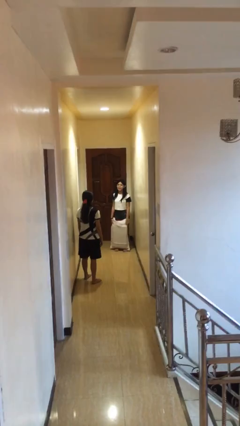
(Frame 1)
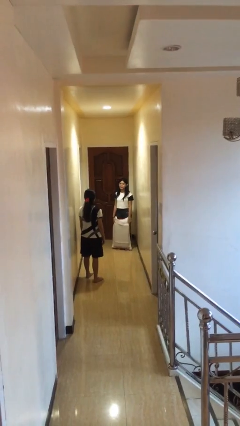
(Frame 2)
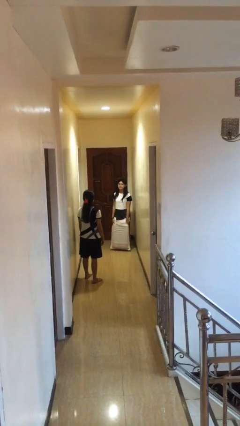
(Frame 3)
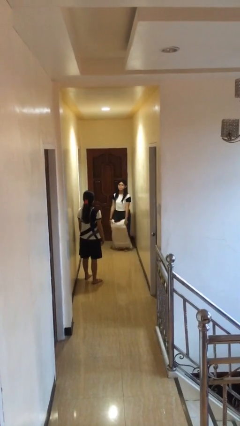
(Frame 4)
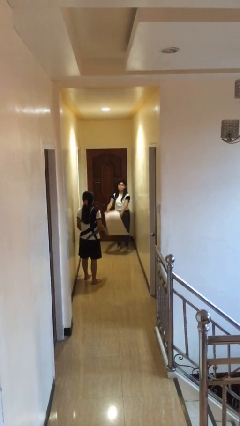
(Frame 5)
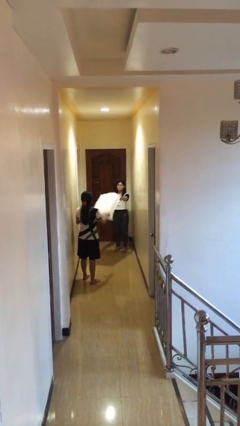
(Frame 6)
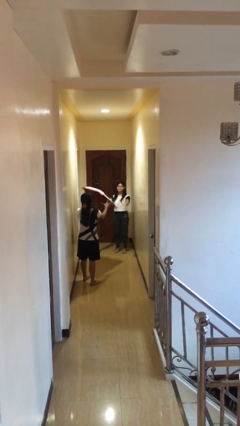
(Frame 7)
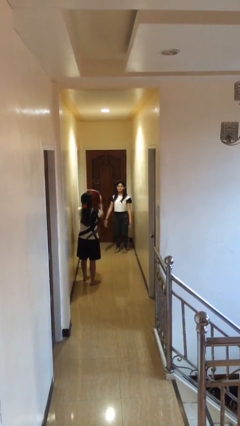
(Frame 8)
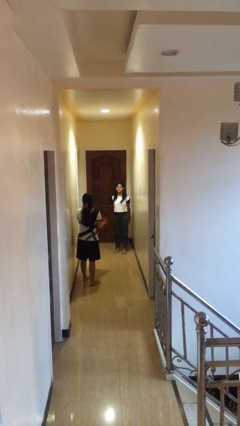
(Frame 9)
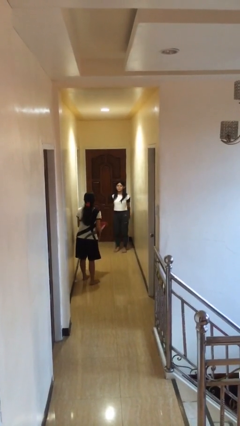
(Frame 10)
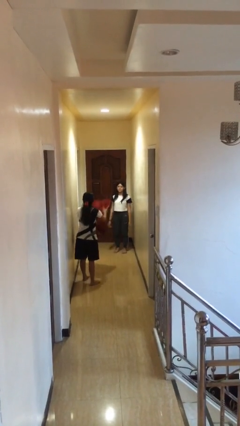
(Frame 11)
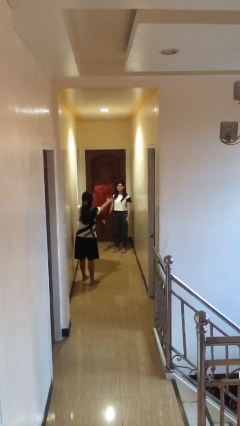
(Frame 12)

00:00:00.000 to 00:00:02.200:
person throws object to person

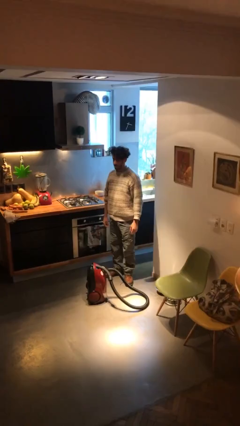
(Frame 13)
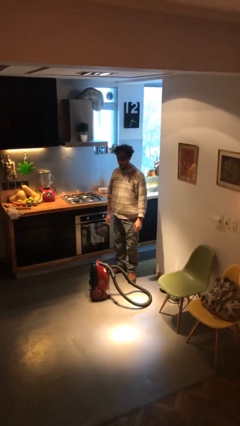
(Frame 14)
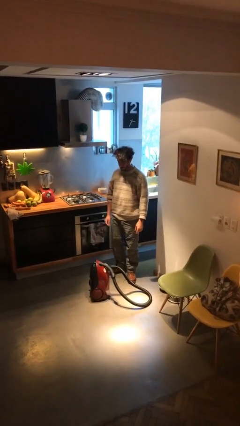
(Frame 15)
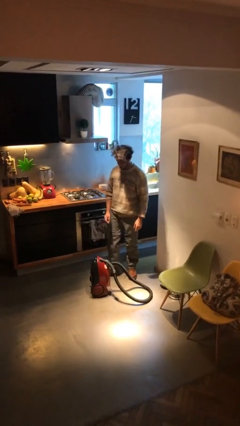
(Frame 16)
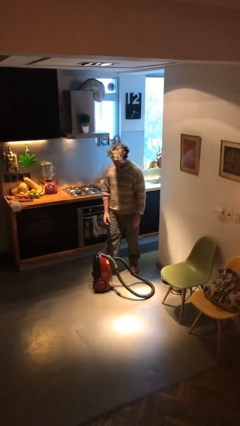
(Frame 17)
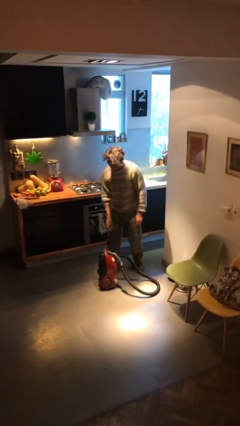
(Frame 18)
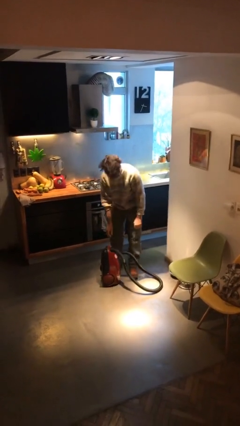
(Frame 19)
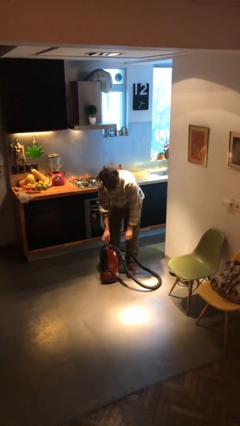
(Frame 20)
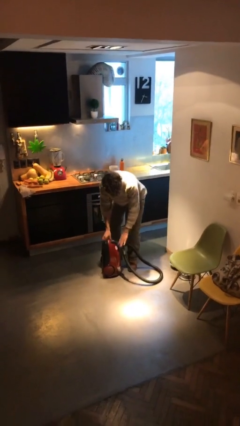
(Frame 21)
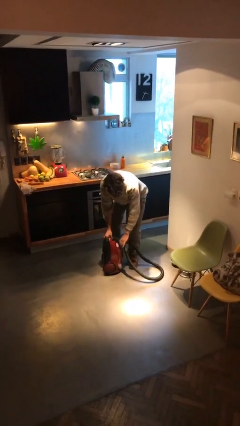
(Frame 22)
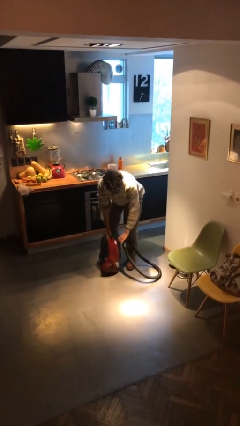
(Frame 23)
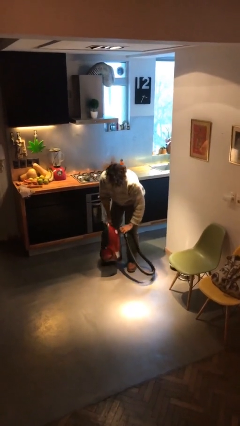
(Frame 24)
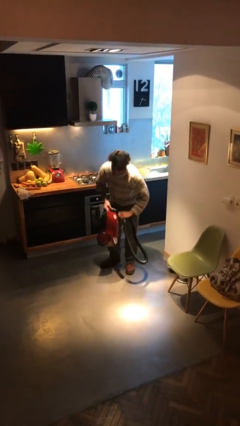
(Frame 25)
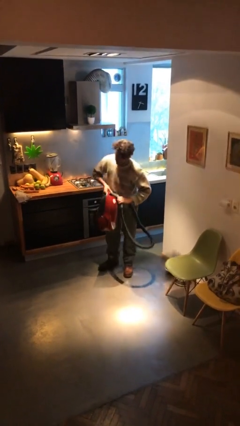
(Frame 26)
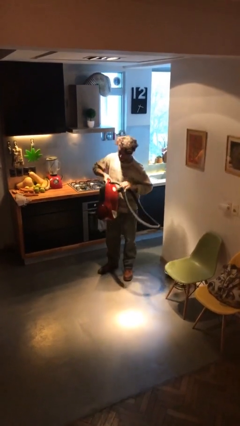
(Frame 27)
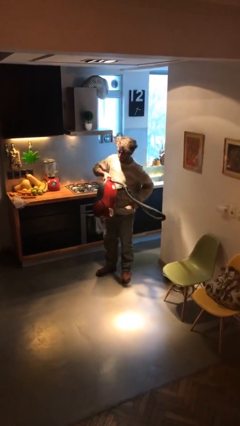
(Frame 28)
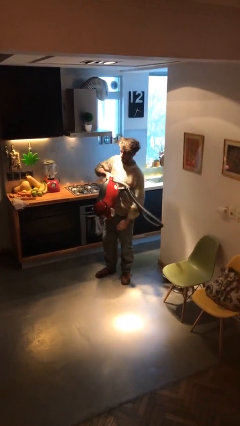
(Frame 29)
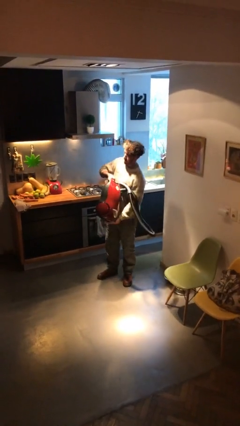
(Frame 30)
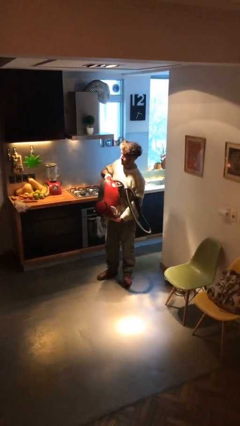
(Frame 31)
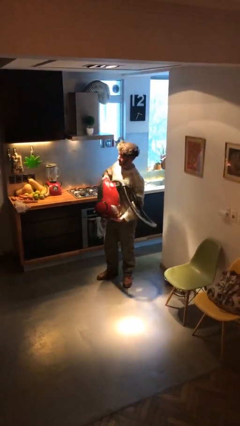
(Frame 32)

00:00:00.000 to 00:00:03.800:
person picks up object from floor

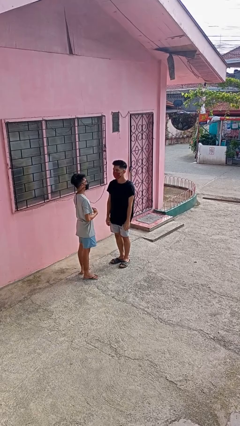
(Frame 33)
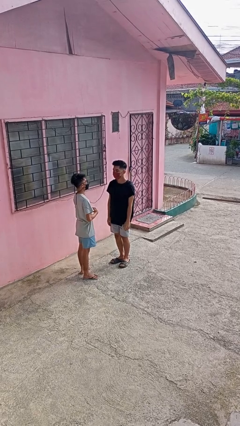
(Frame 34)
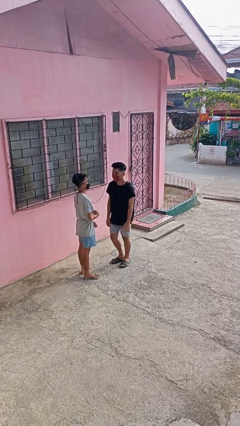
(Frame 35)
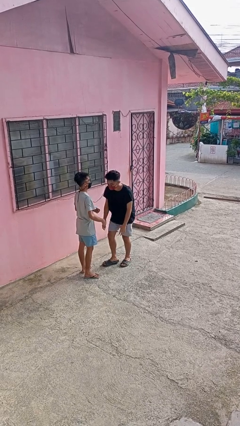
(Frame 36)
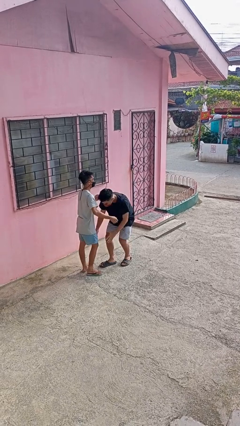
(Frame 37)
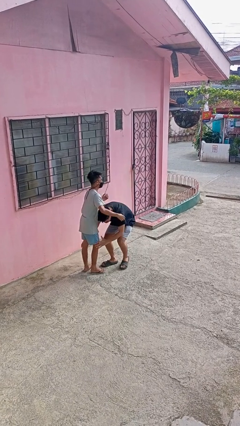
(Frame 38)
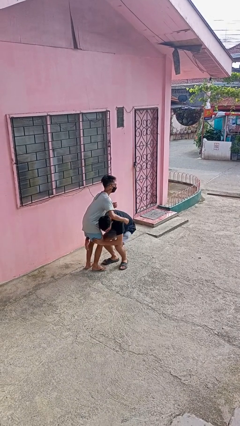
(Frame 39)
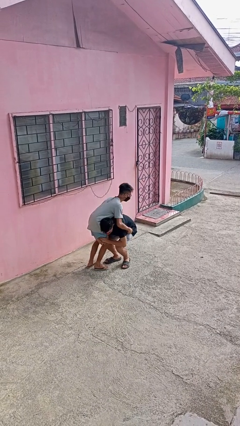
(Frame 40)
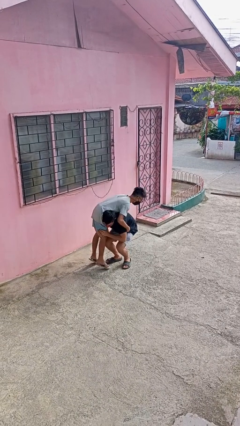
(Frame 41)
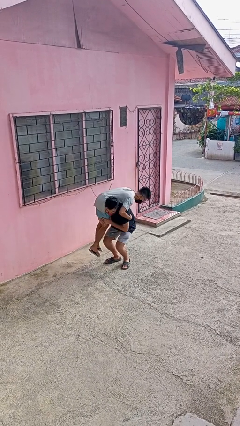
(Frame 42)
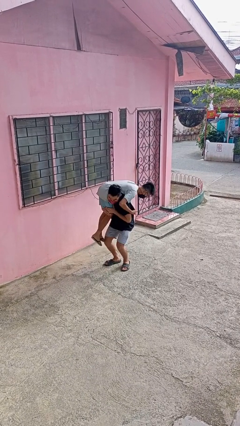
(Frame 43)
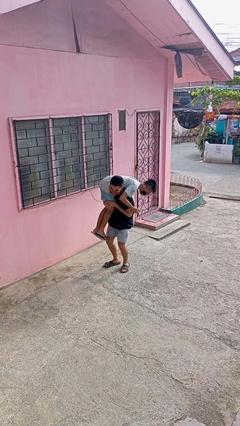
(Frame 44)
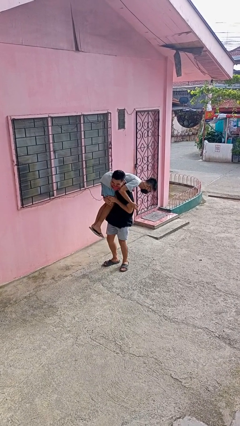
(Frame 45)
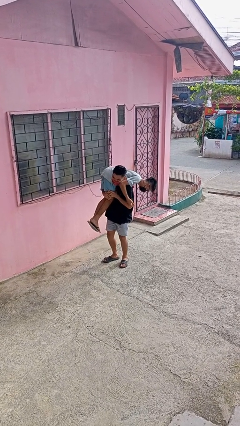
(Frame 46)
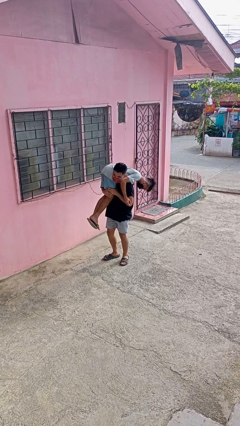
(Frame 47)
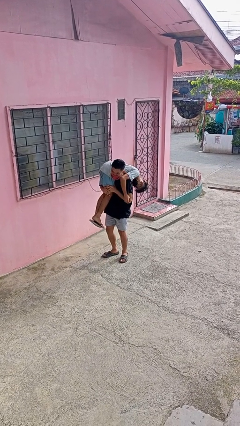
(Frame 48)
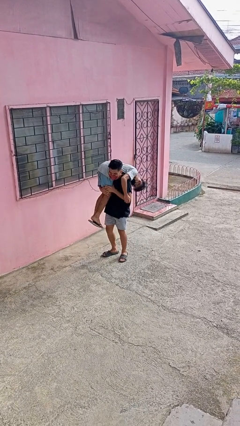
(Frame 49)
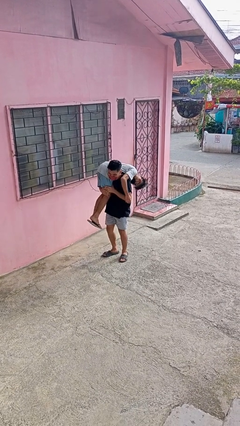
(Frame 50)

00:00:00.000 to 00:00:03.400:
person carries person over shoulder

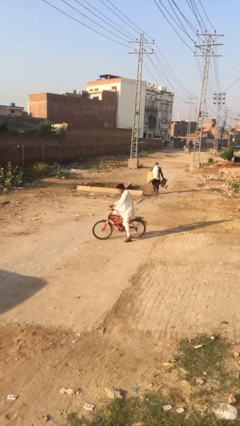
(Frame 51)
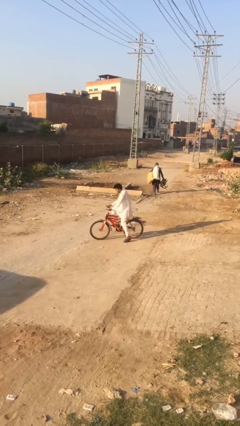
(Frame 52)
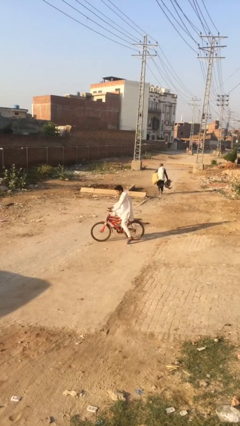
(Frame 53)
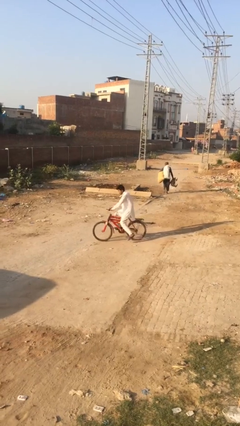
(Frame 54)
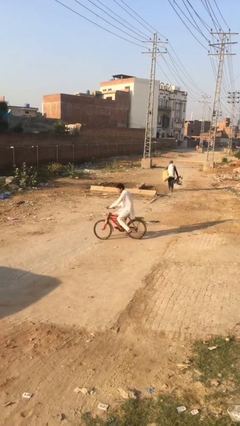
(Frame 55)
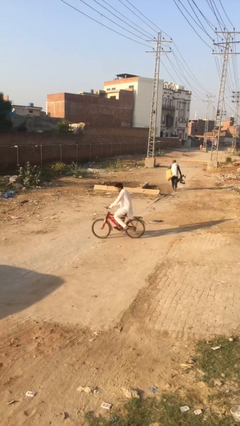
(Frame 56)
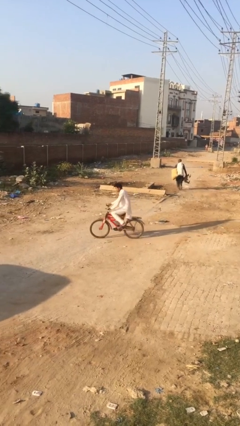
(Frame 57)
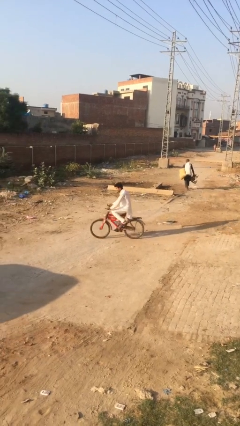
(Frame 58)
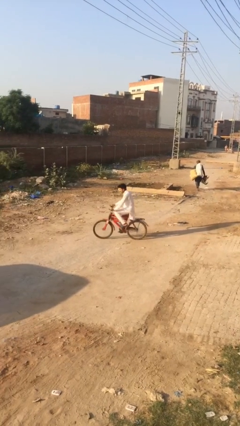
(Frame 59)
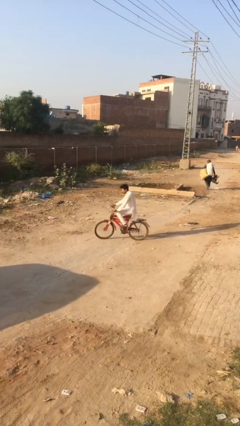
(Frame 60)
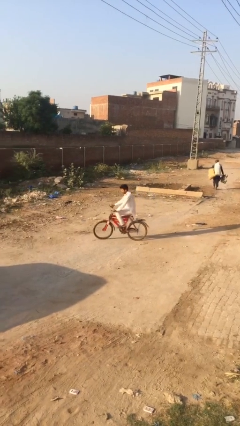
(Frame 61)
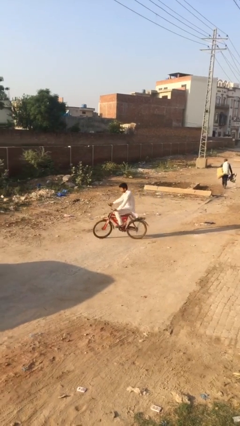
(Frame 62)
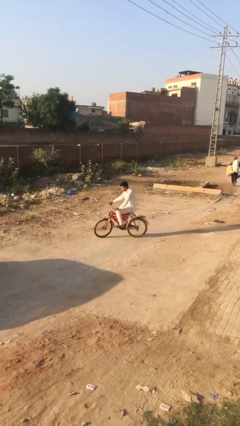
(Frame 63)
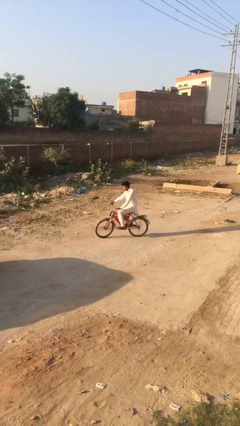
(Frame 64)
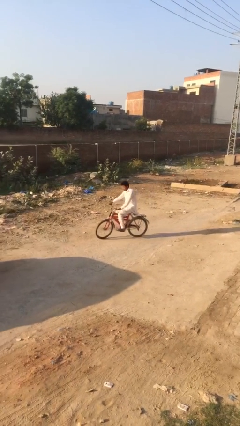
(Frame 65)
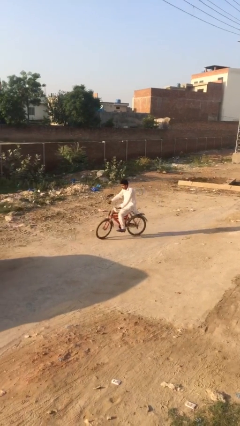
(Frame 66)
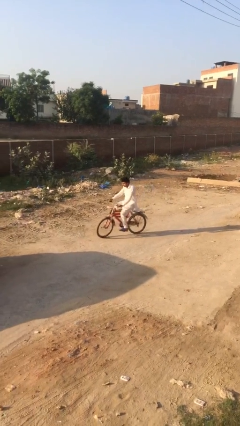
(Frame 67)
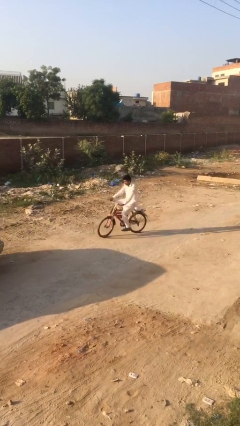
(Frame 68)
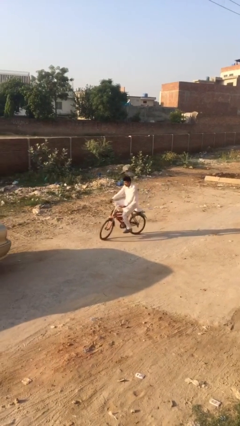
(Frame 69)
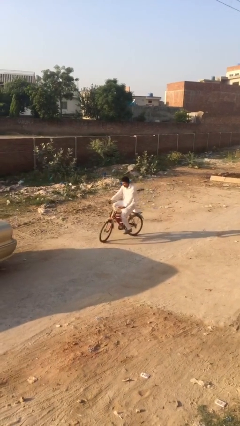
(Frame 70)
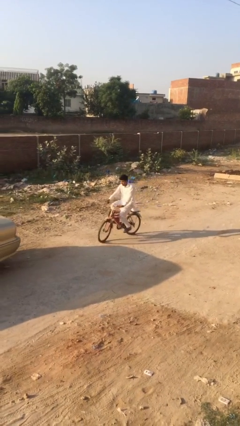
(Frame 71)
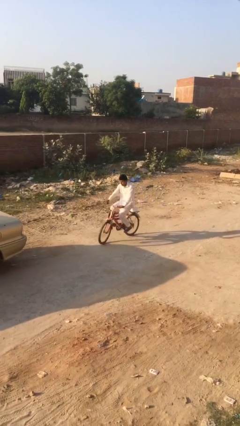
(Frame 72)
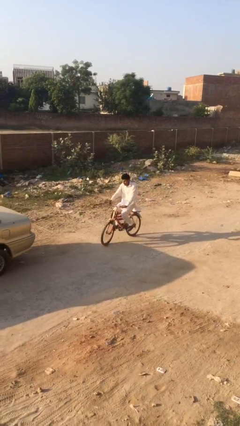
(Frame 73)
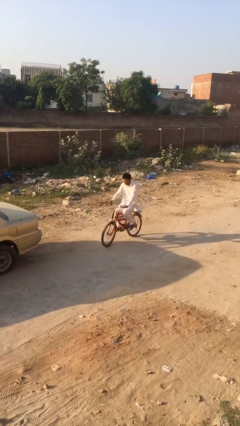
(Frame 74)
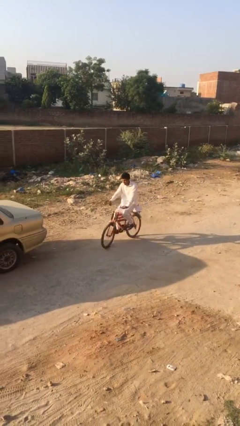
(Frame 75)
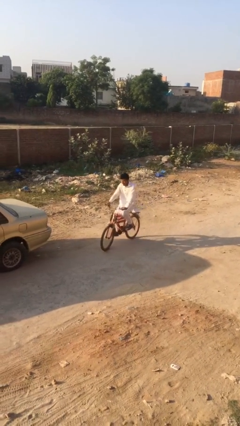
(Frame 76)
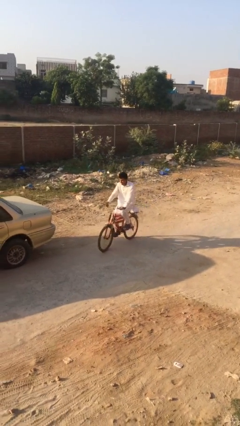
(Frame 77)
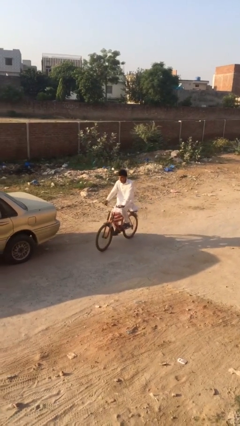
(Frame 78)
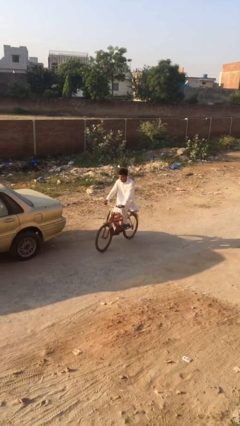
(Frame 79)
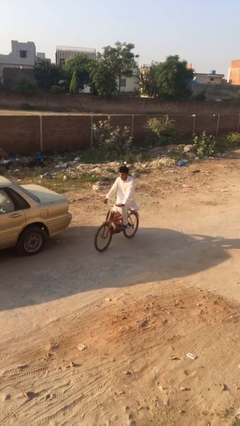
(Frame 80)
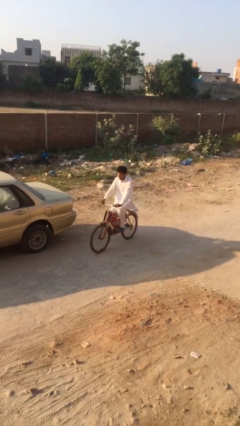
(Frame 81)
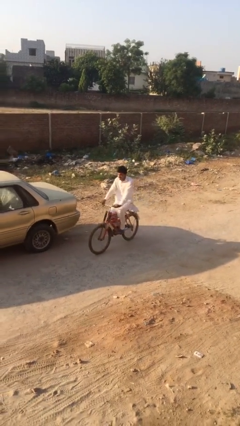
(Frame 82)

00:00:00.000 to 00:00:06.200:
person rides bicycle

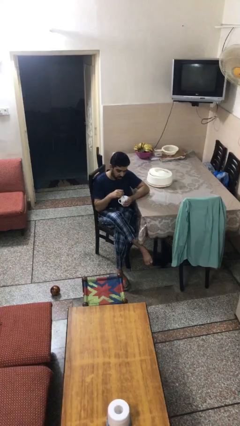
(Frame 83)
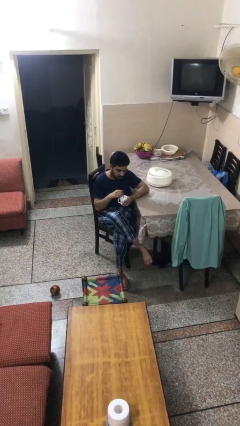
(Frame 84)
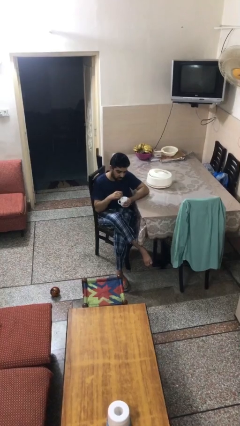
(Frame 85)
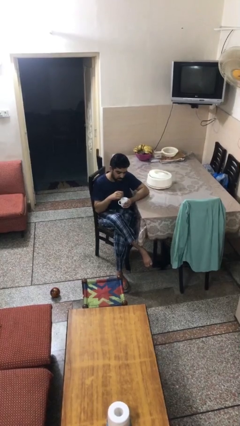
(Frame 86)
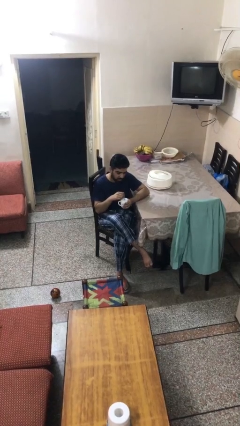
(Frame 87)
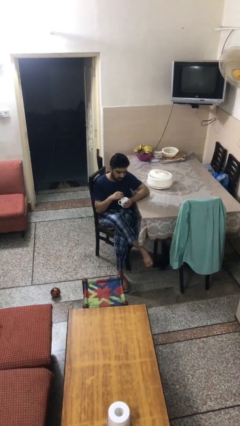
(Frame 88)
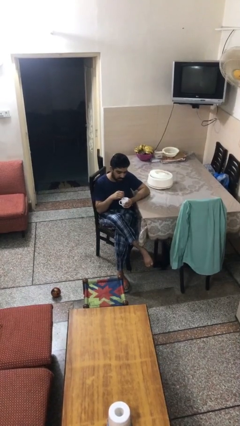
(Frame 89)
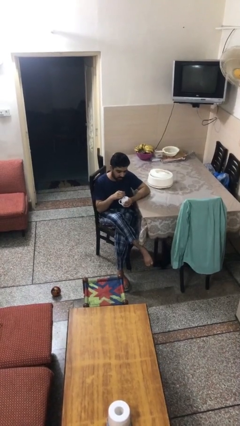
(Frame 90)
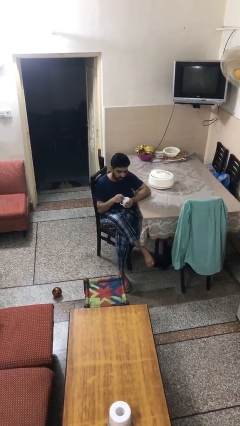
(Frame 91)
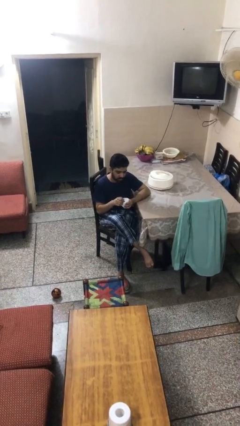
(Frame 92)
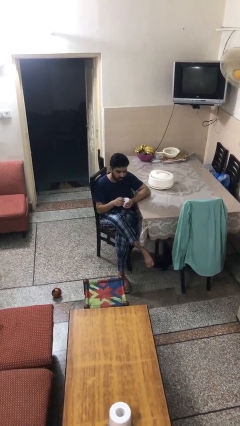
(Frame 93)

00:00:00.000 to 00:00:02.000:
person stirs mug

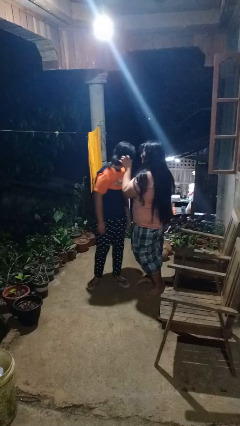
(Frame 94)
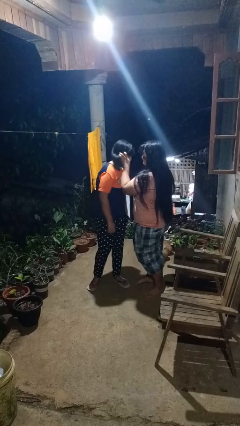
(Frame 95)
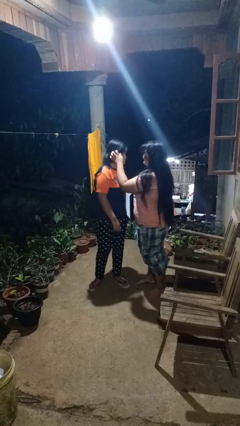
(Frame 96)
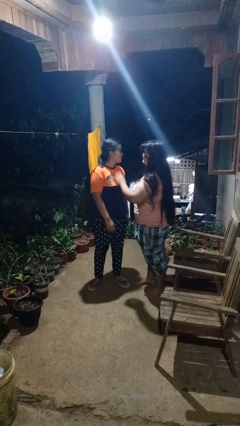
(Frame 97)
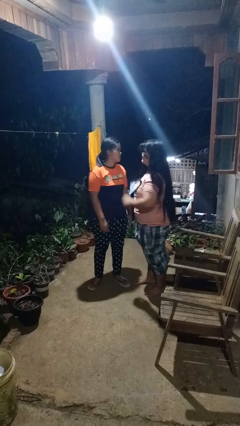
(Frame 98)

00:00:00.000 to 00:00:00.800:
person grabs person by hair
